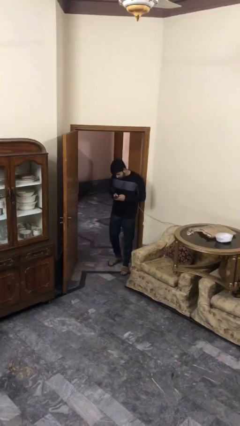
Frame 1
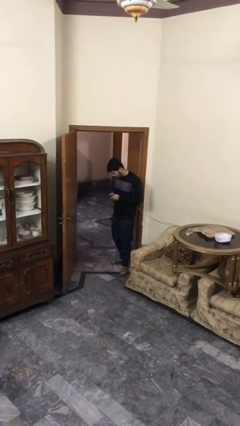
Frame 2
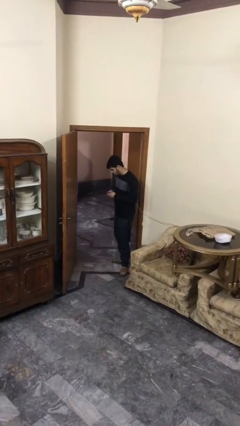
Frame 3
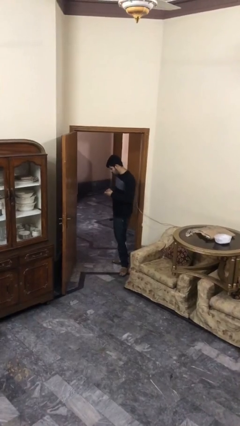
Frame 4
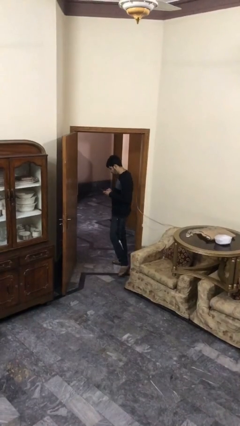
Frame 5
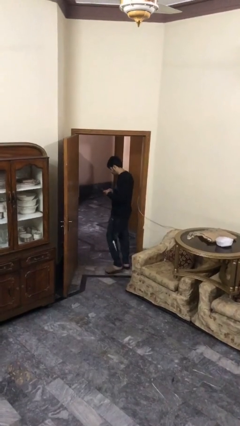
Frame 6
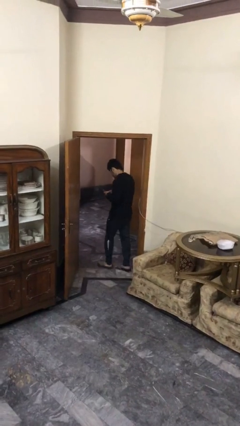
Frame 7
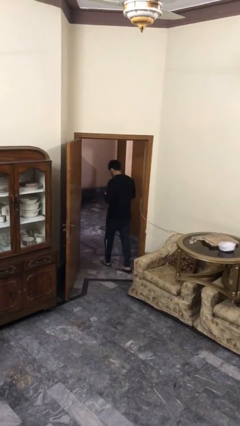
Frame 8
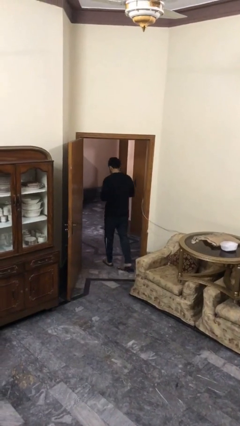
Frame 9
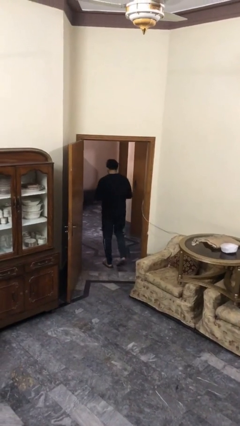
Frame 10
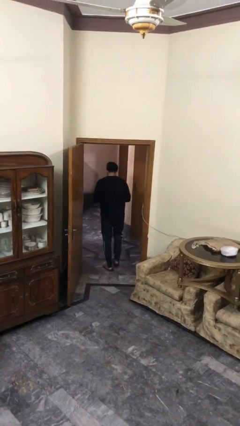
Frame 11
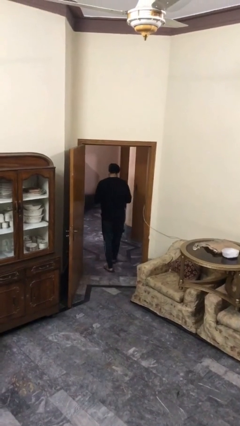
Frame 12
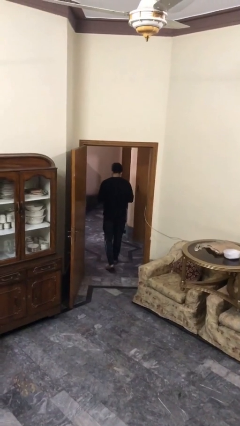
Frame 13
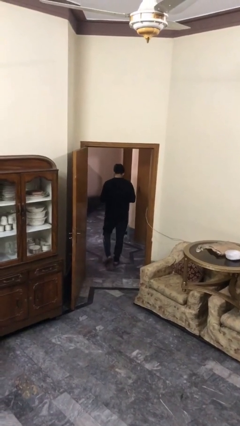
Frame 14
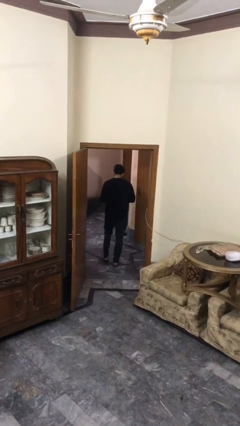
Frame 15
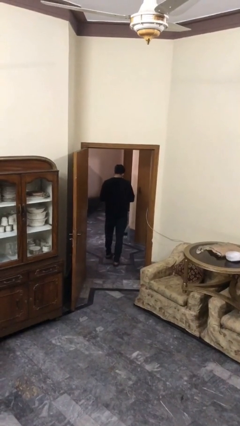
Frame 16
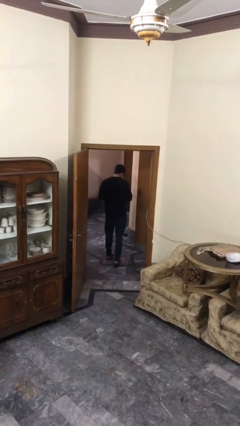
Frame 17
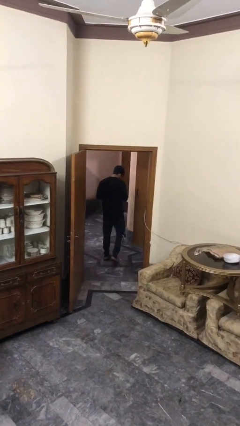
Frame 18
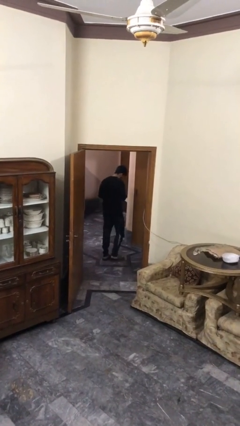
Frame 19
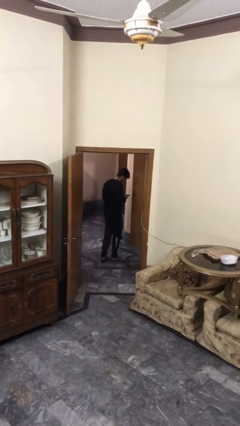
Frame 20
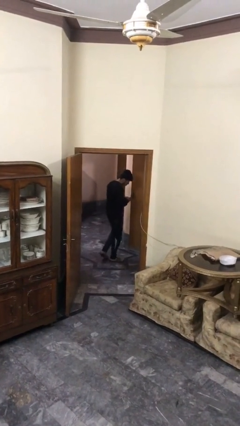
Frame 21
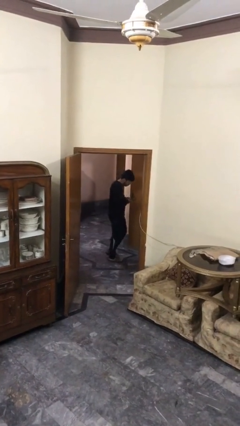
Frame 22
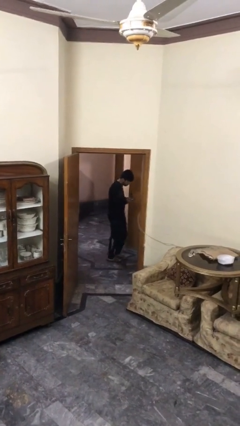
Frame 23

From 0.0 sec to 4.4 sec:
person exits scene through structure

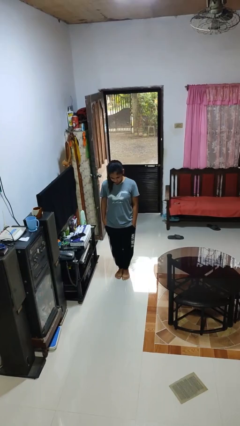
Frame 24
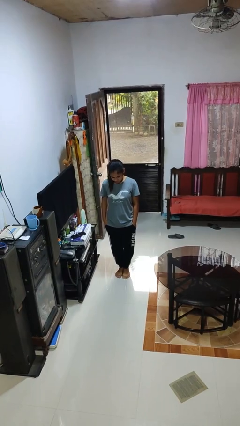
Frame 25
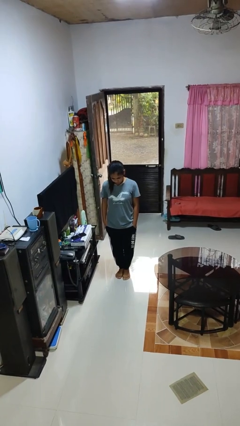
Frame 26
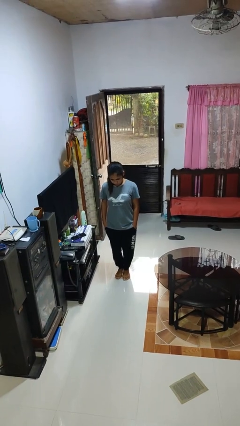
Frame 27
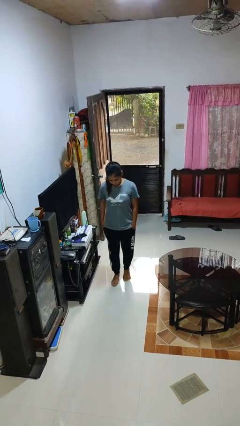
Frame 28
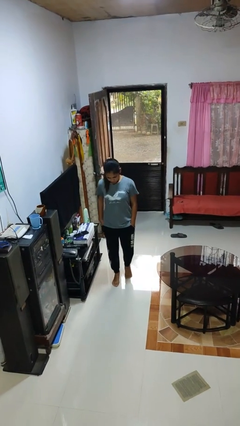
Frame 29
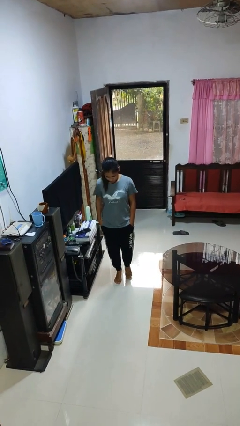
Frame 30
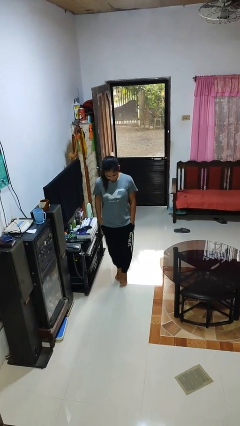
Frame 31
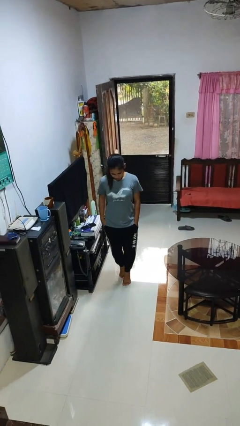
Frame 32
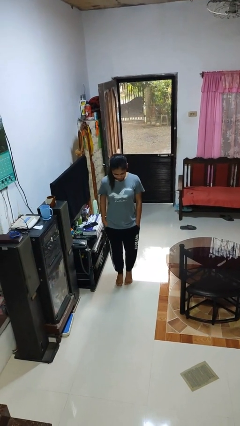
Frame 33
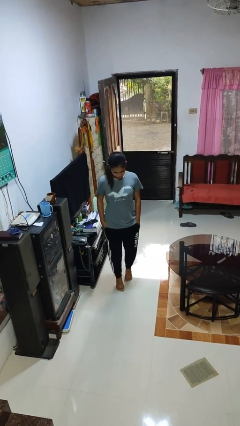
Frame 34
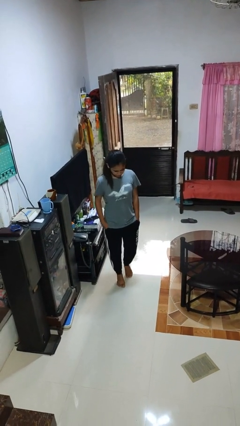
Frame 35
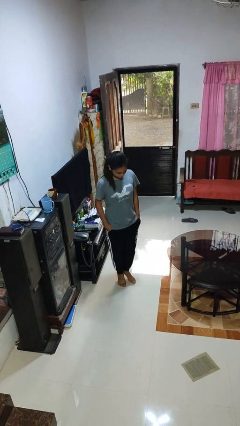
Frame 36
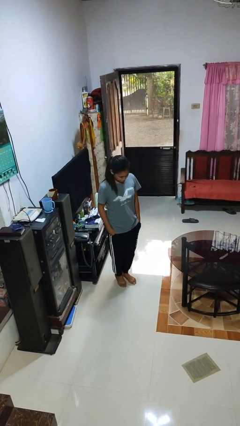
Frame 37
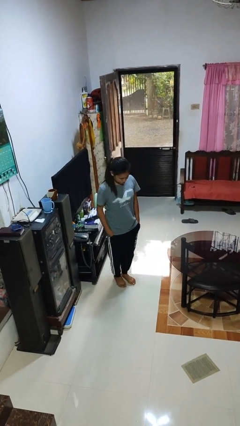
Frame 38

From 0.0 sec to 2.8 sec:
person walks tiptoe

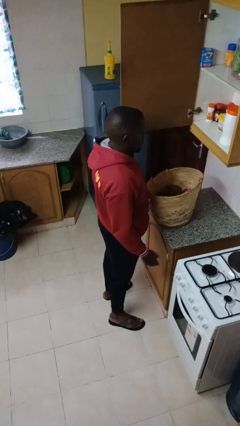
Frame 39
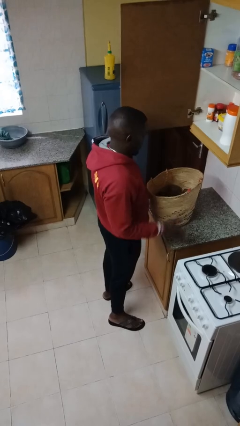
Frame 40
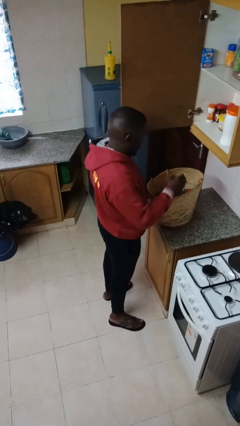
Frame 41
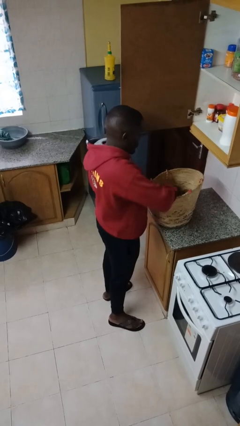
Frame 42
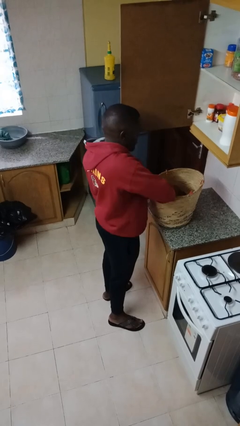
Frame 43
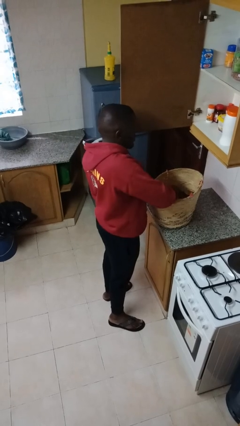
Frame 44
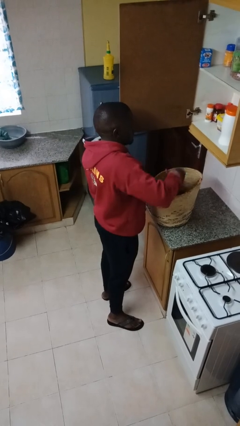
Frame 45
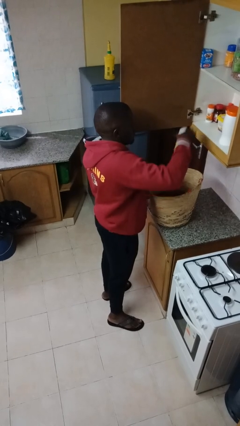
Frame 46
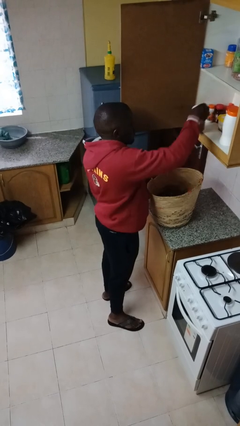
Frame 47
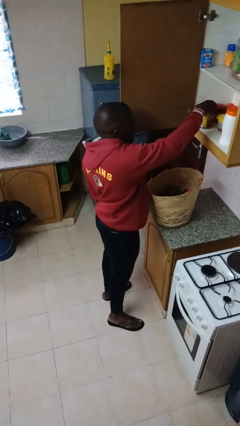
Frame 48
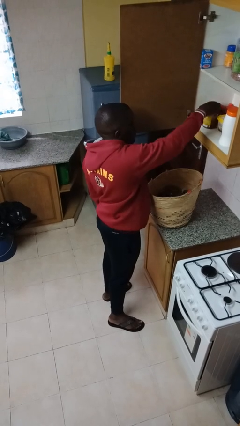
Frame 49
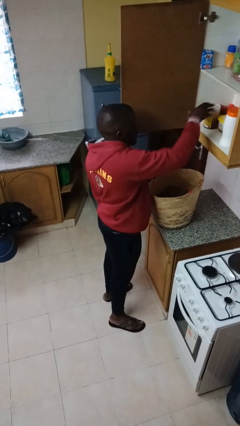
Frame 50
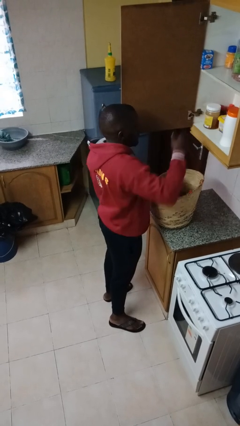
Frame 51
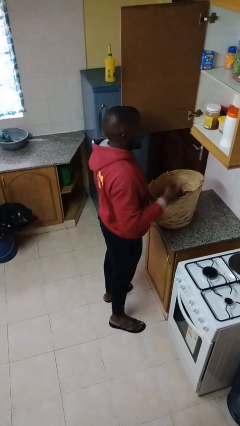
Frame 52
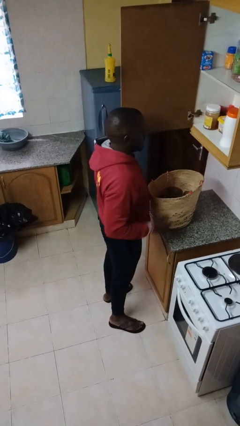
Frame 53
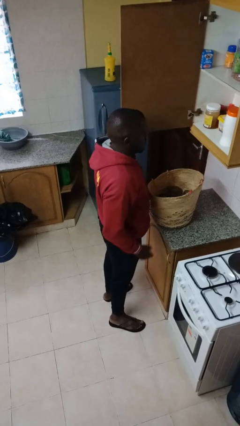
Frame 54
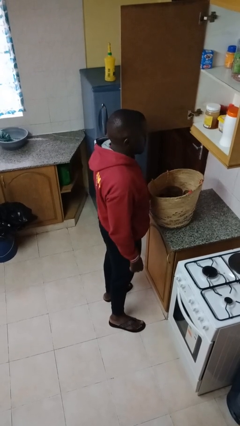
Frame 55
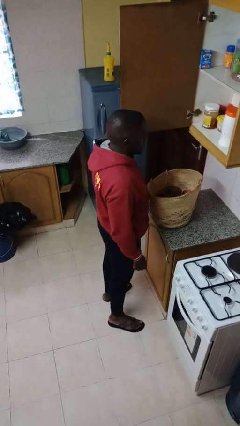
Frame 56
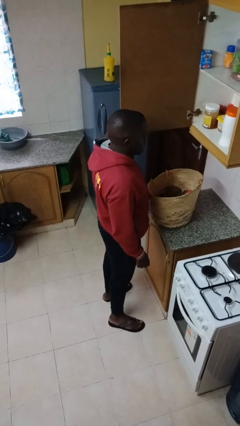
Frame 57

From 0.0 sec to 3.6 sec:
person loads groceries into cabinet

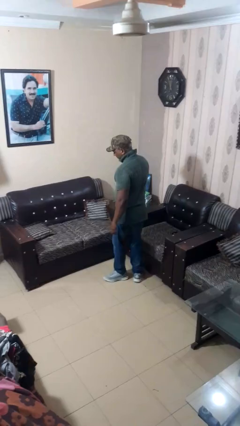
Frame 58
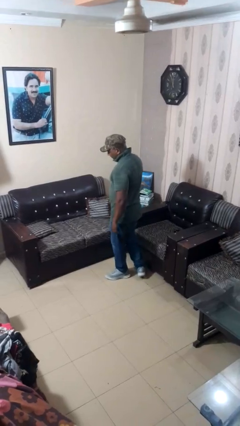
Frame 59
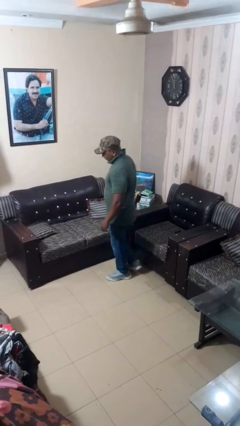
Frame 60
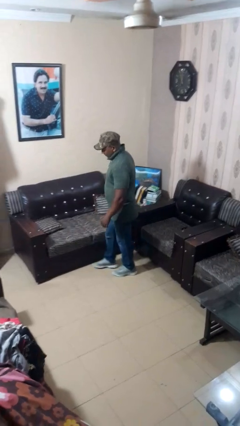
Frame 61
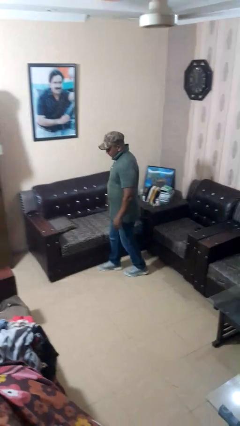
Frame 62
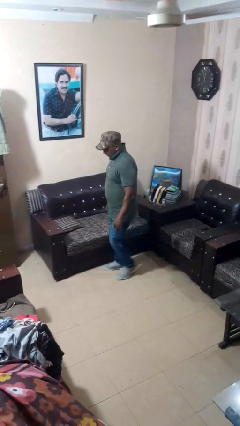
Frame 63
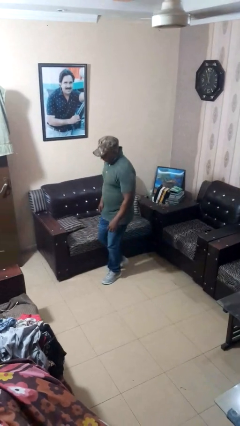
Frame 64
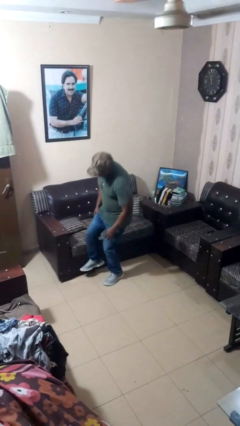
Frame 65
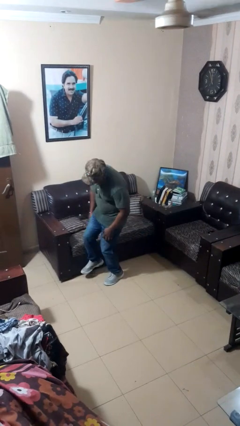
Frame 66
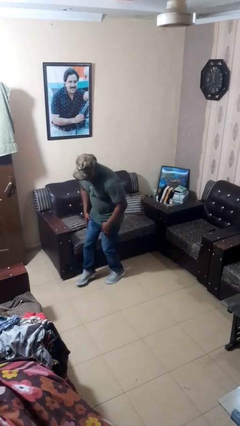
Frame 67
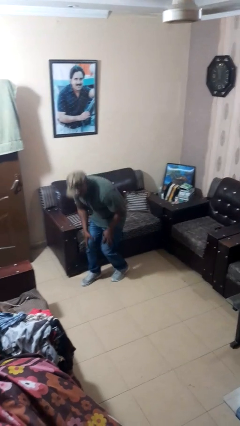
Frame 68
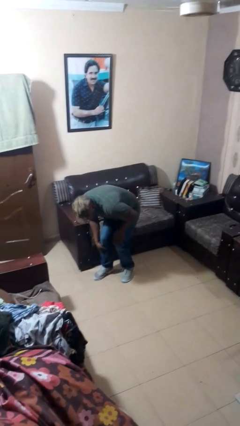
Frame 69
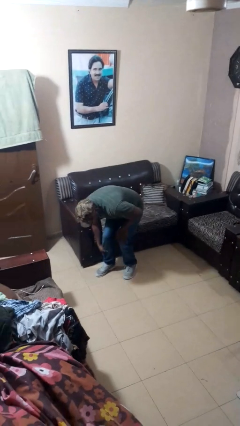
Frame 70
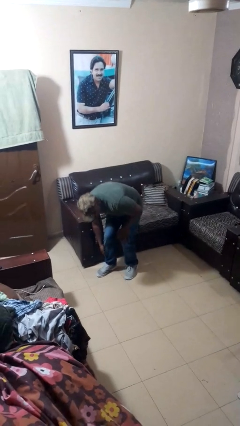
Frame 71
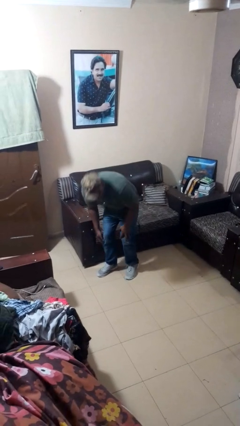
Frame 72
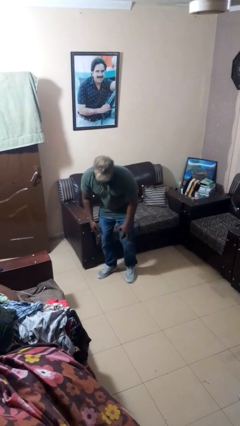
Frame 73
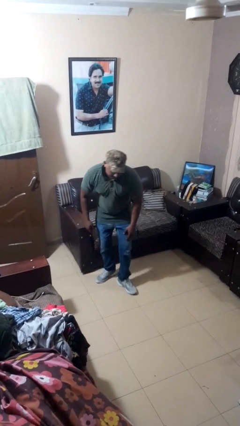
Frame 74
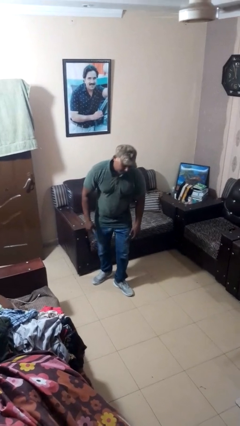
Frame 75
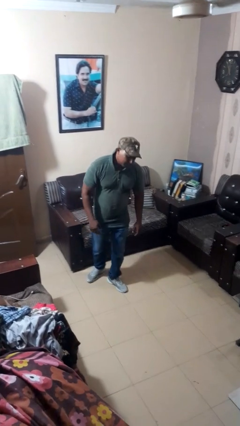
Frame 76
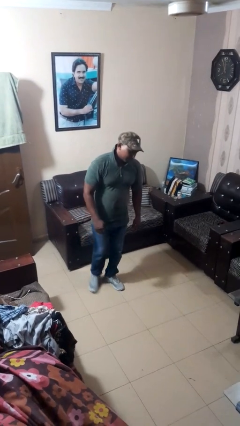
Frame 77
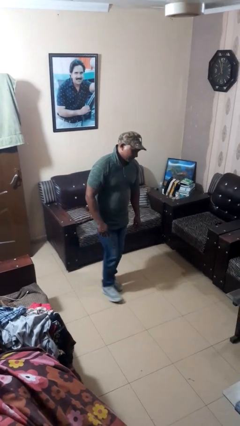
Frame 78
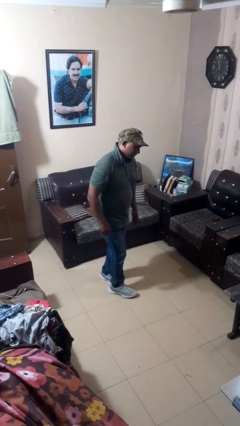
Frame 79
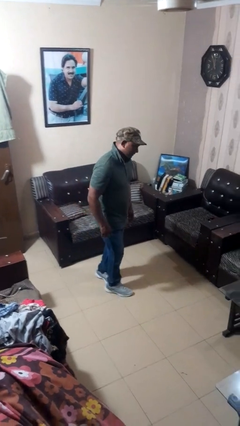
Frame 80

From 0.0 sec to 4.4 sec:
person stubs toe

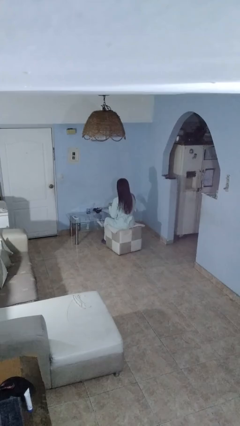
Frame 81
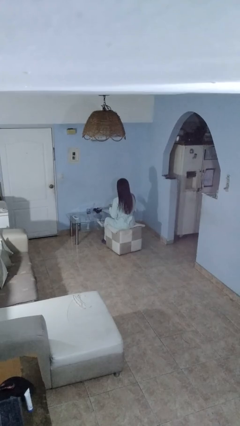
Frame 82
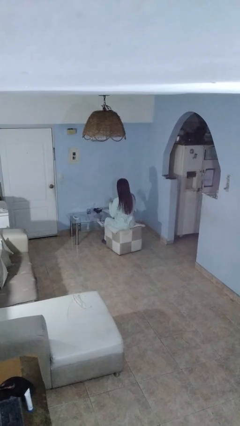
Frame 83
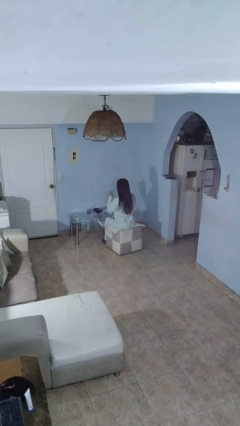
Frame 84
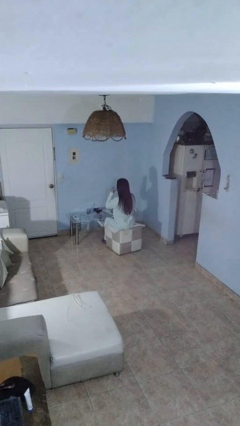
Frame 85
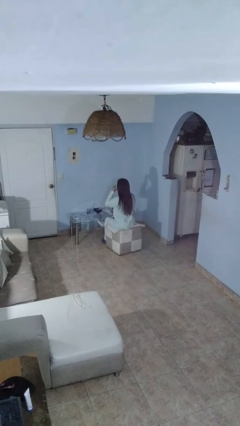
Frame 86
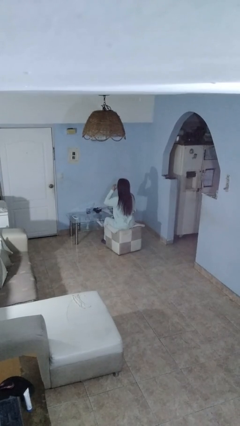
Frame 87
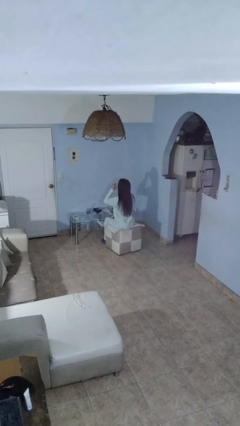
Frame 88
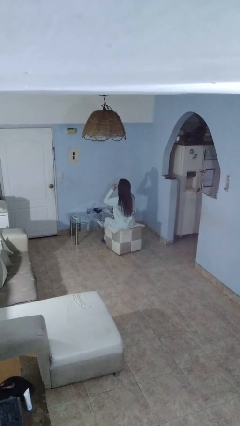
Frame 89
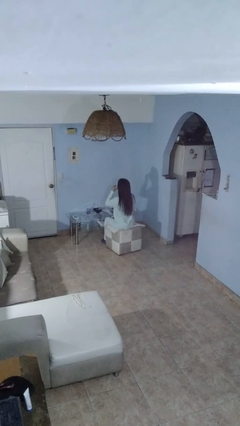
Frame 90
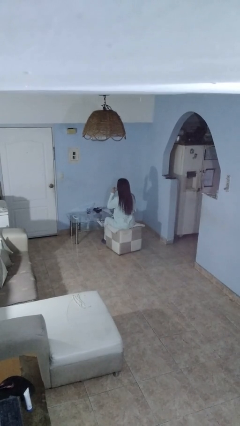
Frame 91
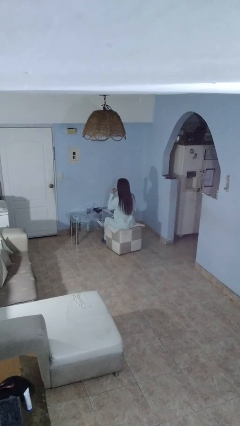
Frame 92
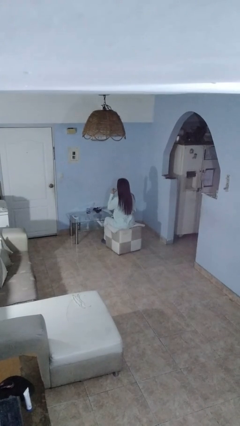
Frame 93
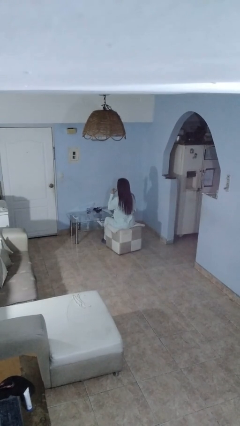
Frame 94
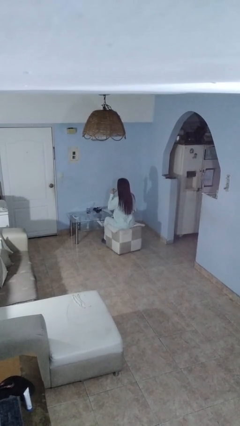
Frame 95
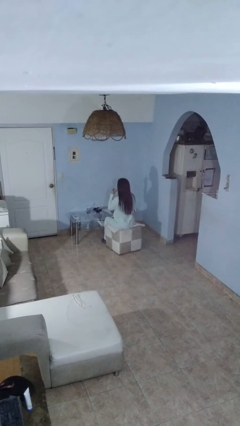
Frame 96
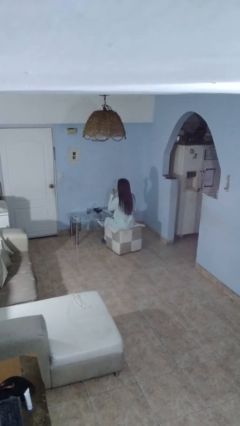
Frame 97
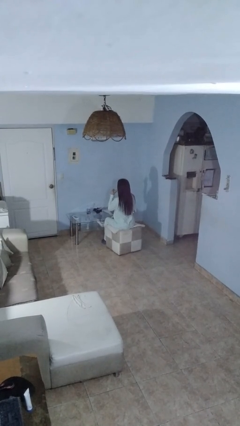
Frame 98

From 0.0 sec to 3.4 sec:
person drinks from shotglass
